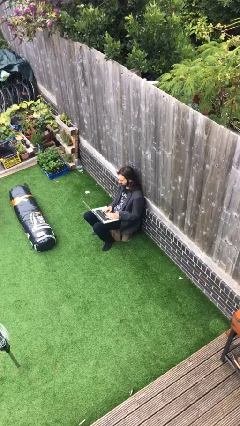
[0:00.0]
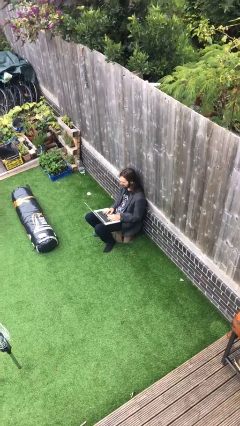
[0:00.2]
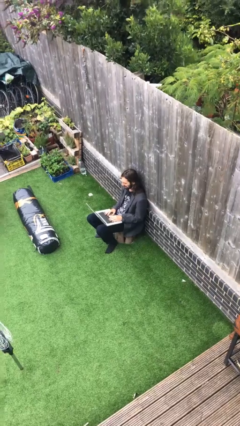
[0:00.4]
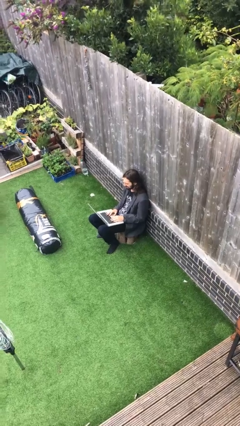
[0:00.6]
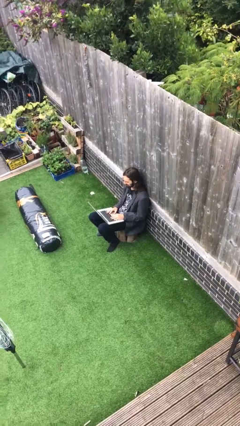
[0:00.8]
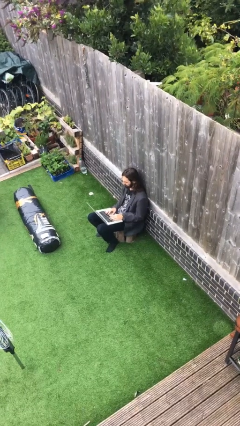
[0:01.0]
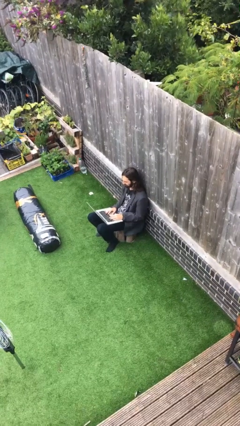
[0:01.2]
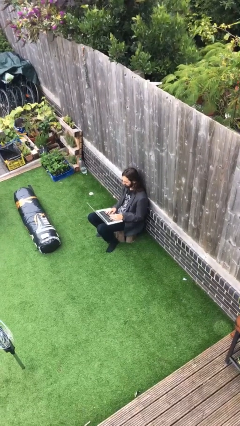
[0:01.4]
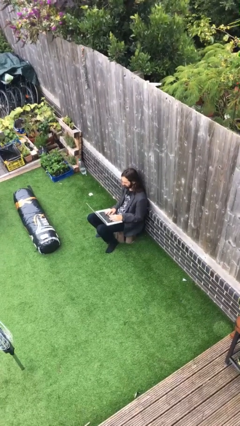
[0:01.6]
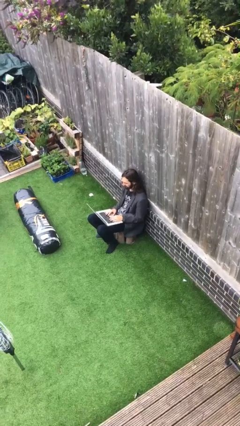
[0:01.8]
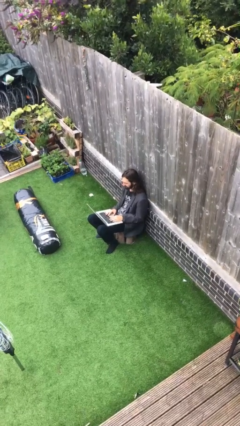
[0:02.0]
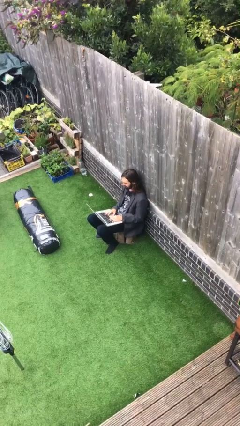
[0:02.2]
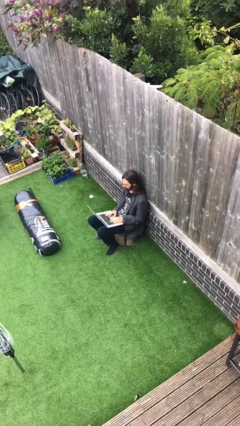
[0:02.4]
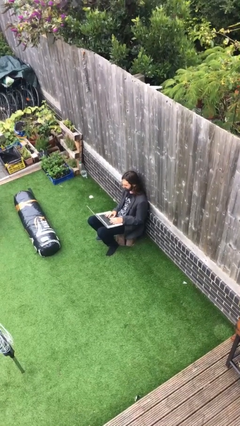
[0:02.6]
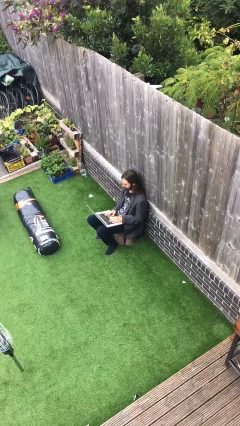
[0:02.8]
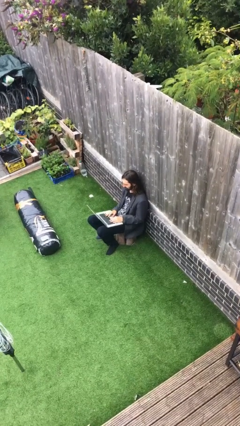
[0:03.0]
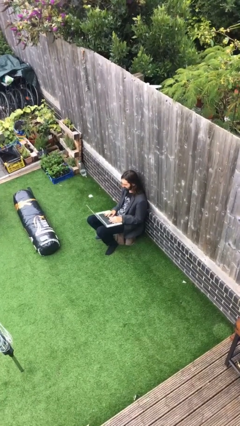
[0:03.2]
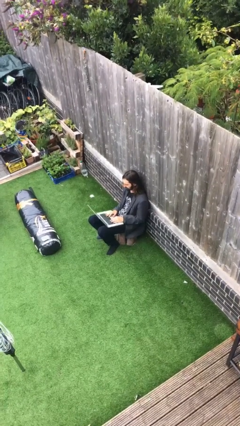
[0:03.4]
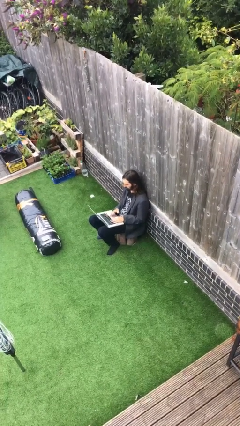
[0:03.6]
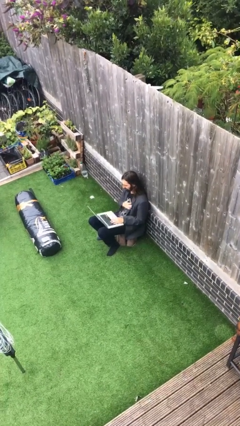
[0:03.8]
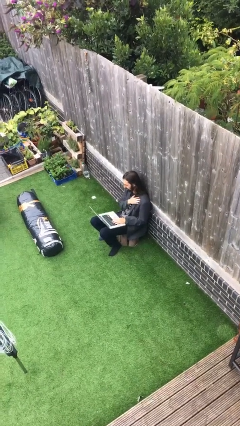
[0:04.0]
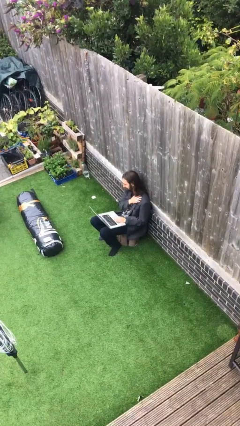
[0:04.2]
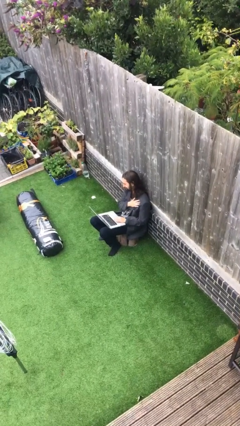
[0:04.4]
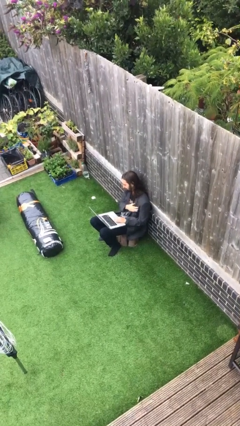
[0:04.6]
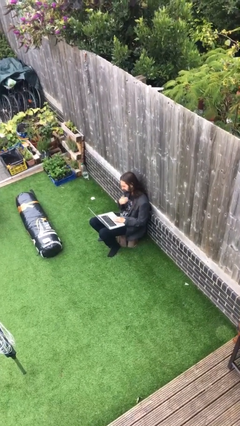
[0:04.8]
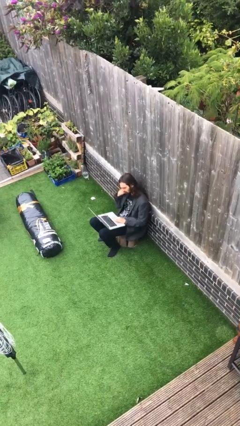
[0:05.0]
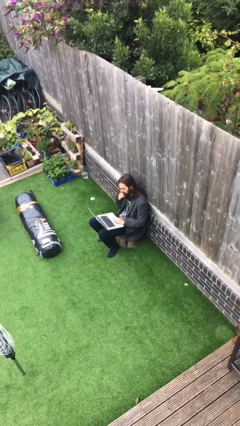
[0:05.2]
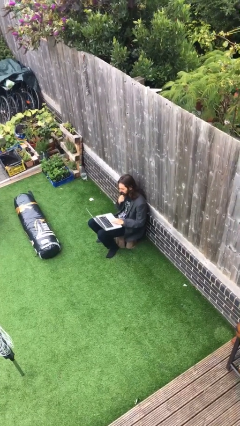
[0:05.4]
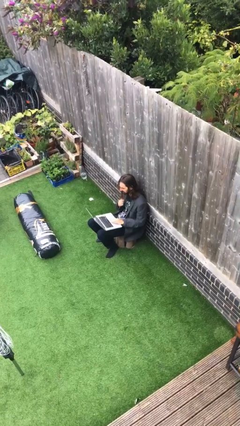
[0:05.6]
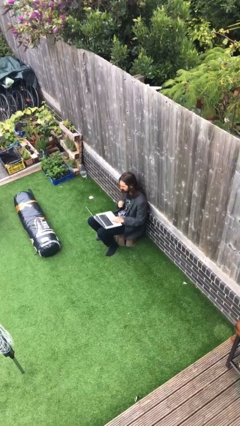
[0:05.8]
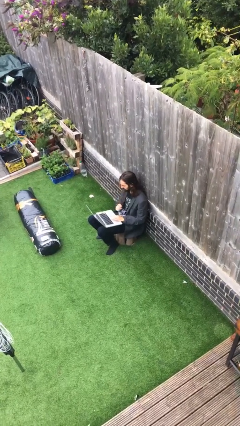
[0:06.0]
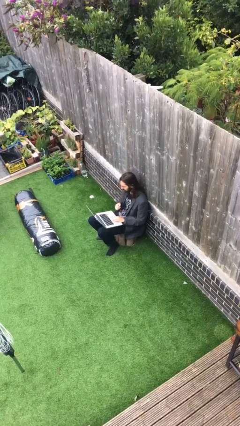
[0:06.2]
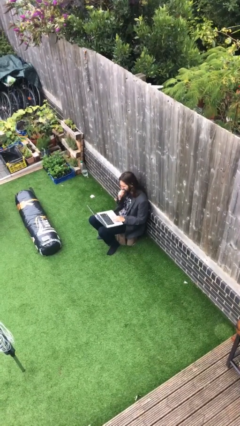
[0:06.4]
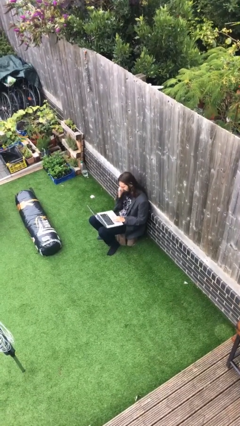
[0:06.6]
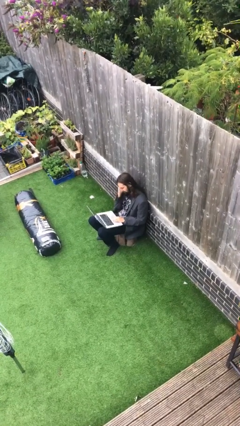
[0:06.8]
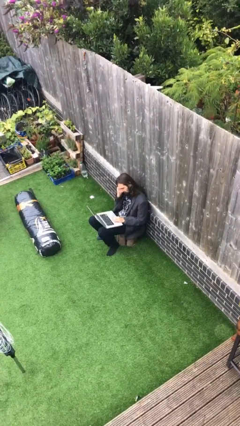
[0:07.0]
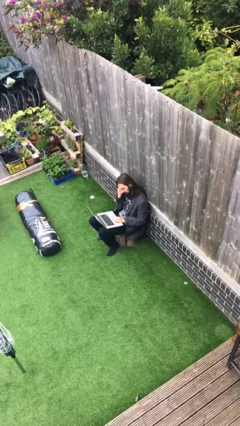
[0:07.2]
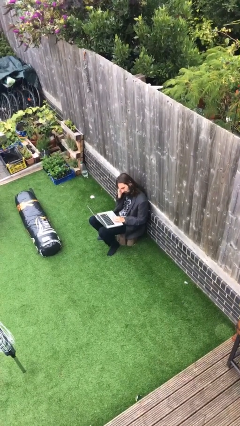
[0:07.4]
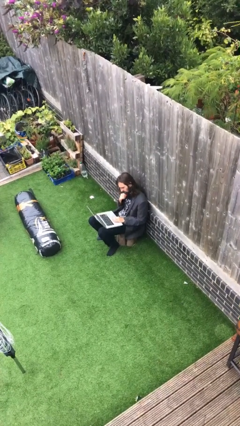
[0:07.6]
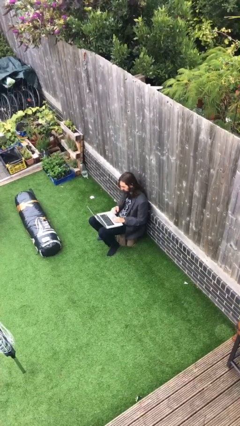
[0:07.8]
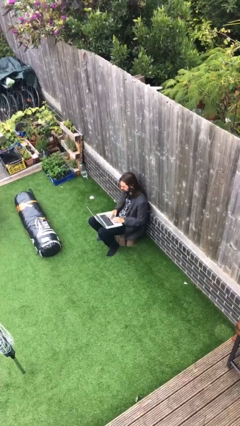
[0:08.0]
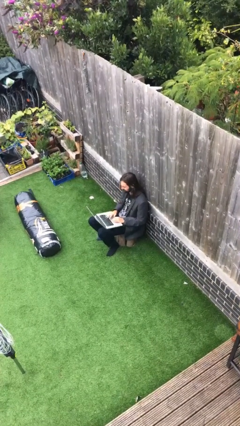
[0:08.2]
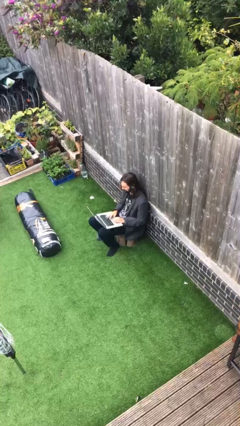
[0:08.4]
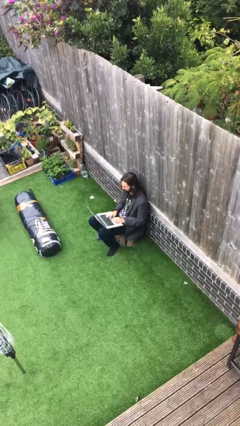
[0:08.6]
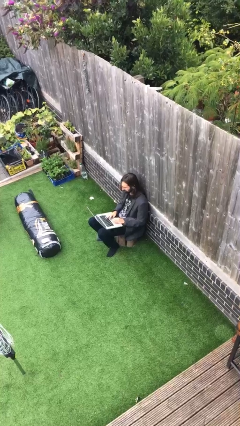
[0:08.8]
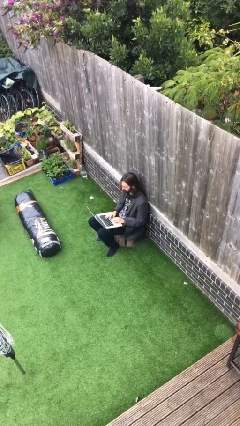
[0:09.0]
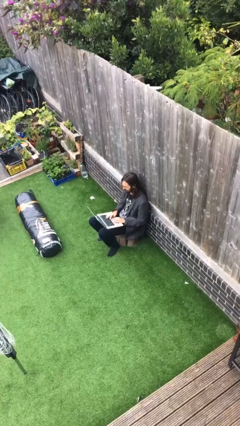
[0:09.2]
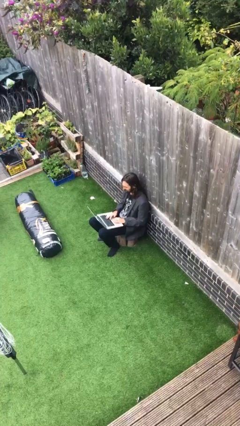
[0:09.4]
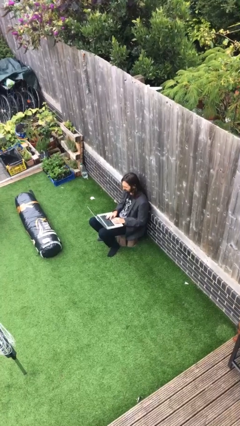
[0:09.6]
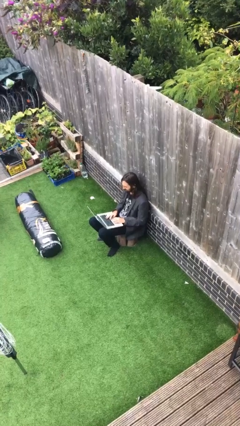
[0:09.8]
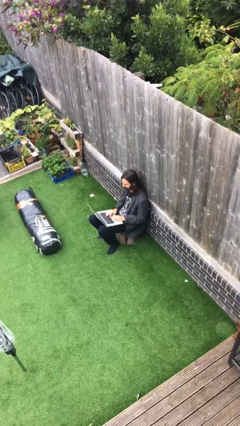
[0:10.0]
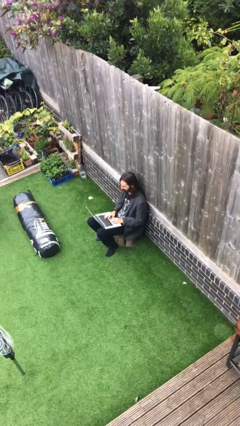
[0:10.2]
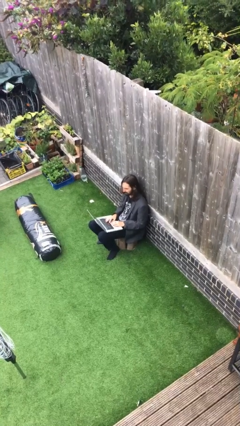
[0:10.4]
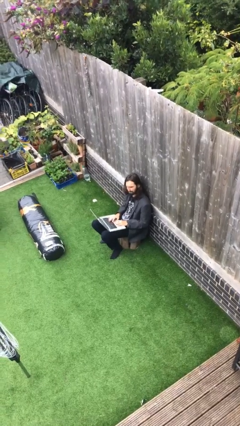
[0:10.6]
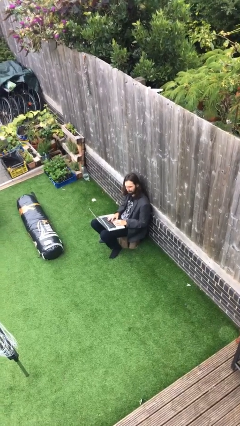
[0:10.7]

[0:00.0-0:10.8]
person interacts with laptop

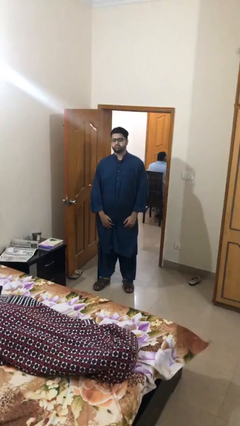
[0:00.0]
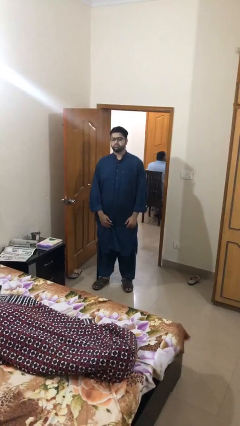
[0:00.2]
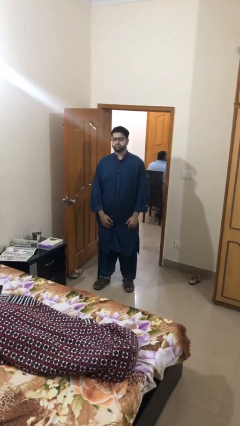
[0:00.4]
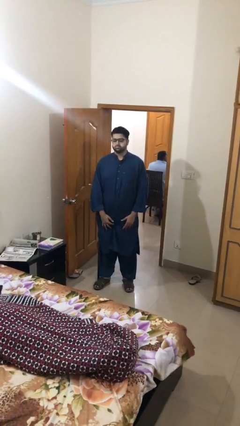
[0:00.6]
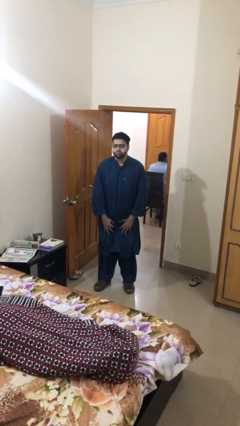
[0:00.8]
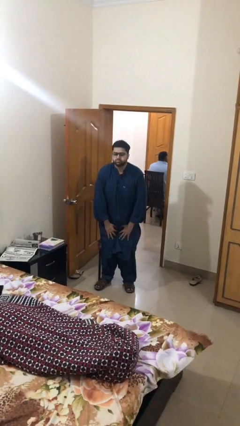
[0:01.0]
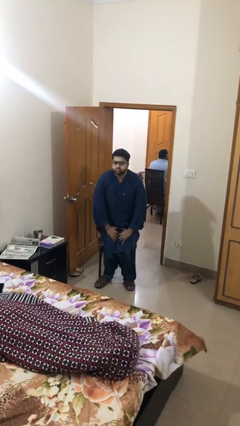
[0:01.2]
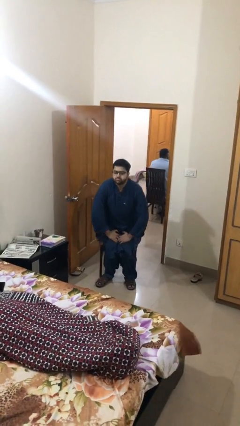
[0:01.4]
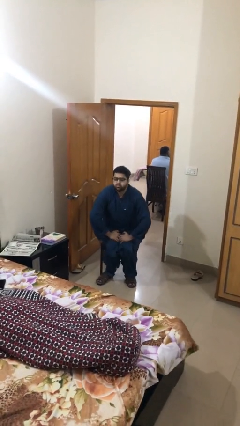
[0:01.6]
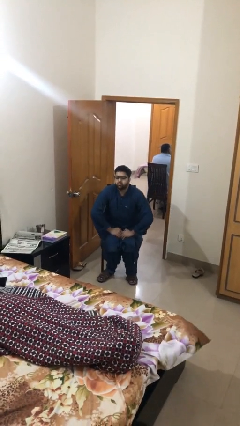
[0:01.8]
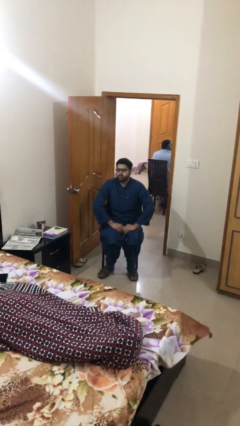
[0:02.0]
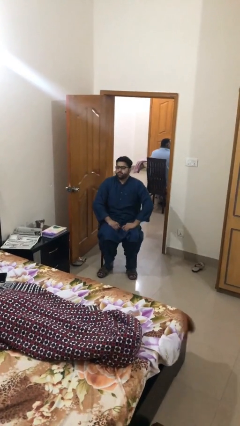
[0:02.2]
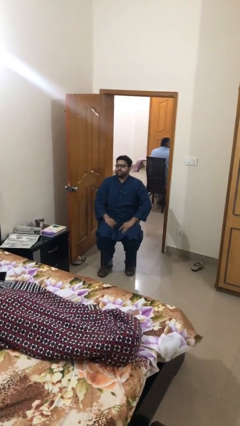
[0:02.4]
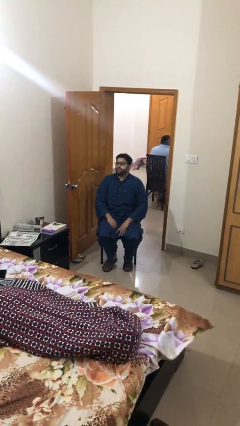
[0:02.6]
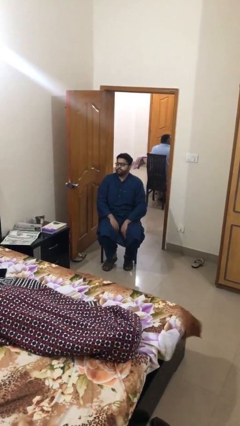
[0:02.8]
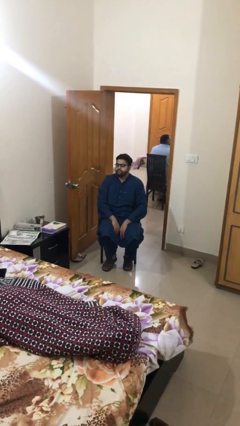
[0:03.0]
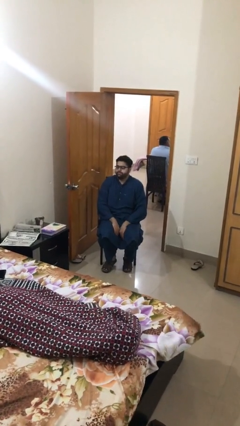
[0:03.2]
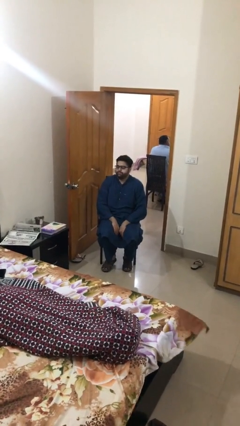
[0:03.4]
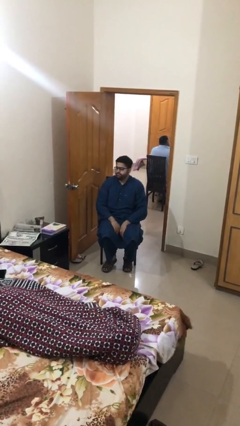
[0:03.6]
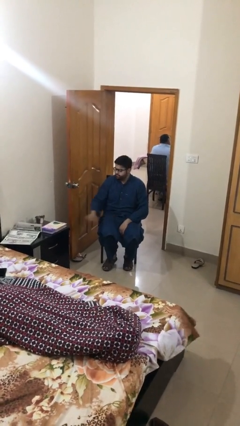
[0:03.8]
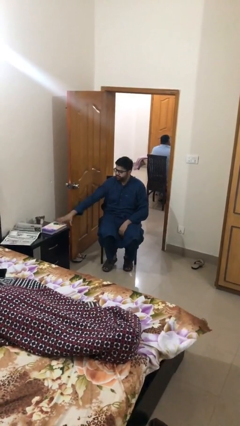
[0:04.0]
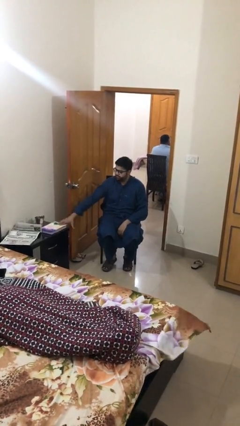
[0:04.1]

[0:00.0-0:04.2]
person sits down

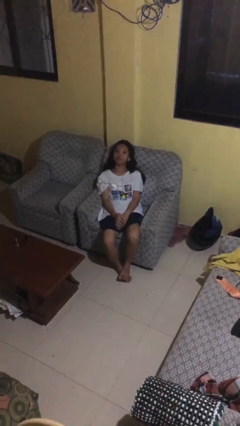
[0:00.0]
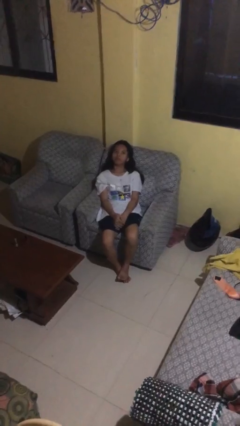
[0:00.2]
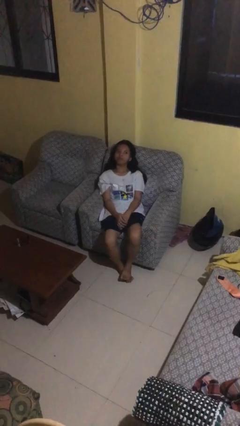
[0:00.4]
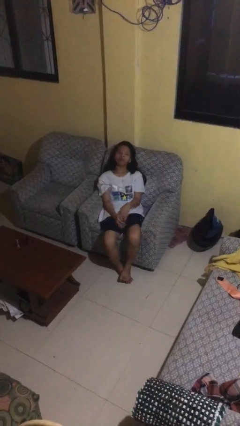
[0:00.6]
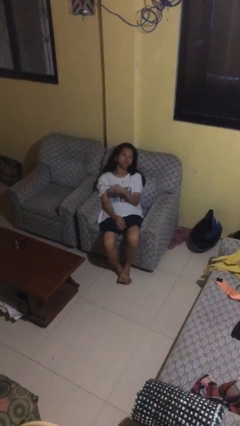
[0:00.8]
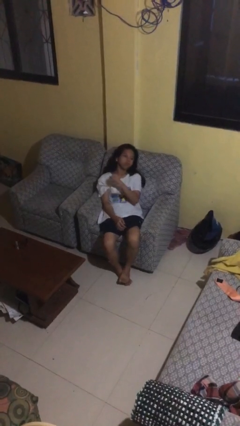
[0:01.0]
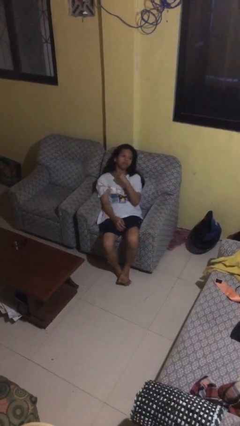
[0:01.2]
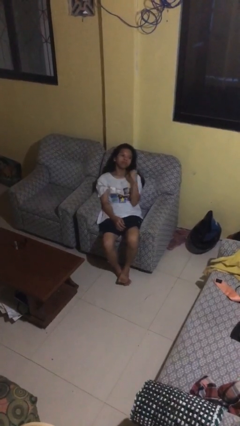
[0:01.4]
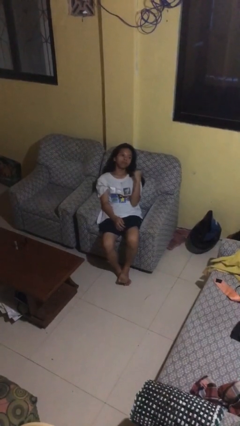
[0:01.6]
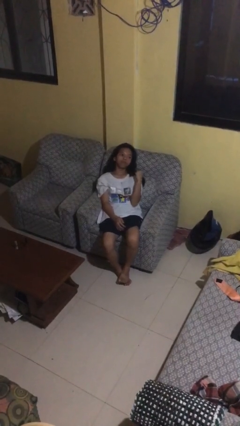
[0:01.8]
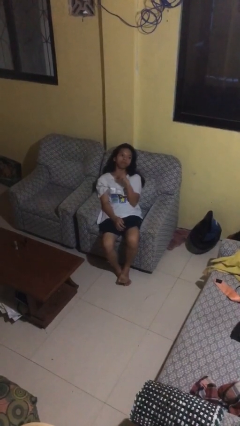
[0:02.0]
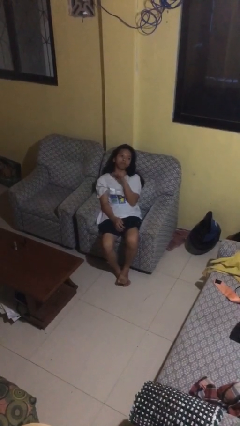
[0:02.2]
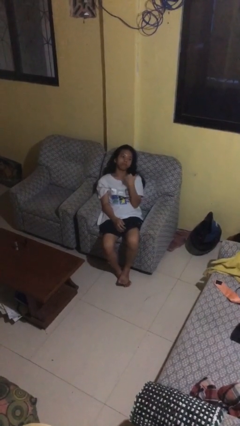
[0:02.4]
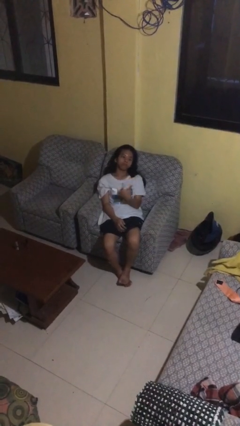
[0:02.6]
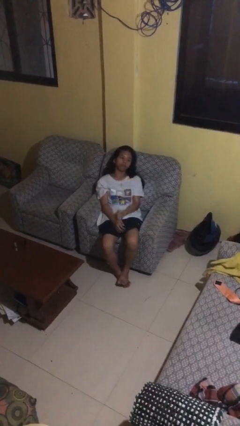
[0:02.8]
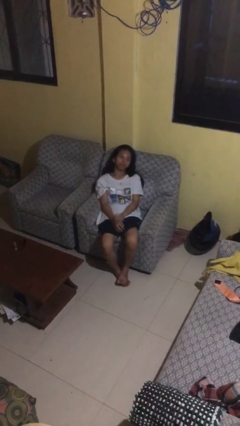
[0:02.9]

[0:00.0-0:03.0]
person gestures cut
